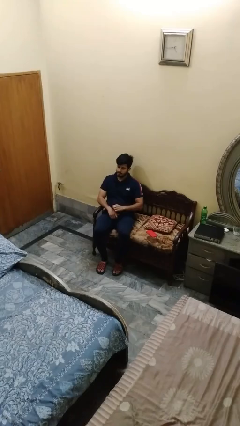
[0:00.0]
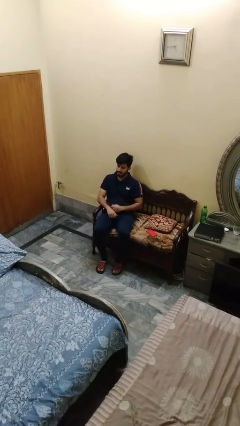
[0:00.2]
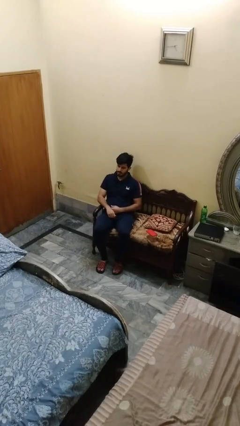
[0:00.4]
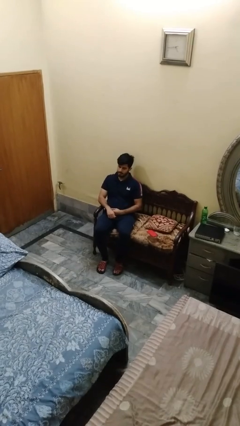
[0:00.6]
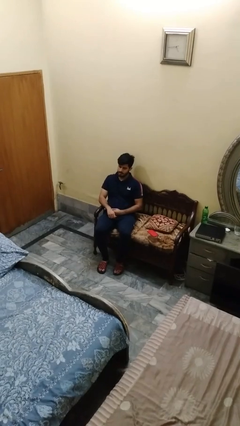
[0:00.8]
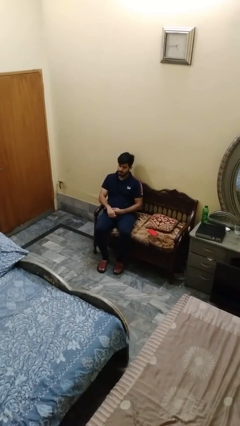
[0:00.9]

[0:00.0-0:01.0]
person gestures lower hand

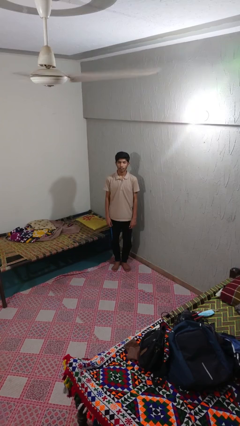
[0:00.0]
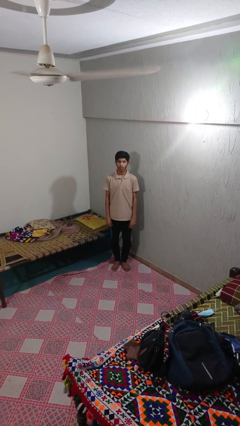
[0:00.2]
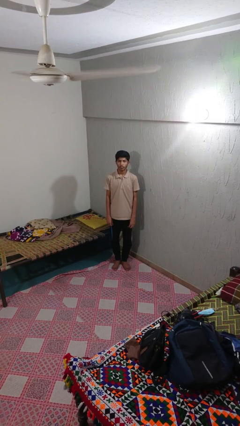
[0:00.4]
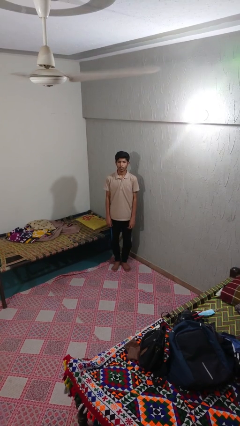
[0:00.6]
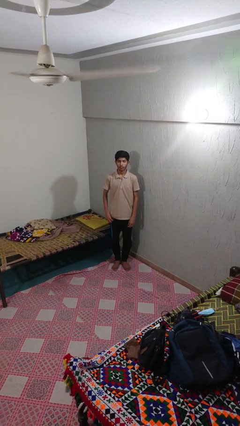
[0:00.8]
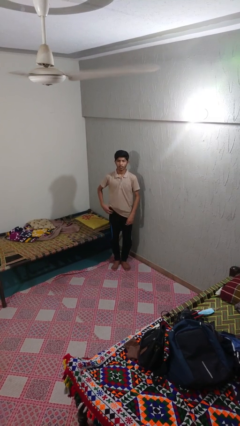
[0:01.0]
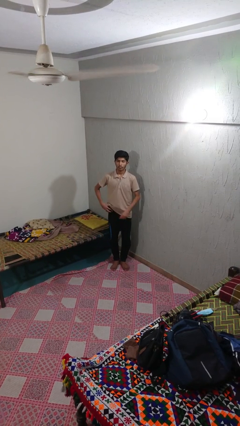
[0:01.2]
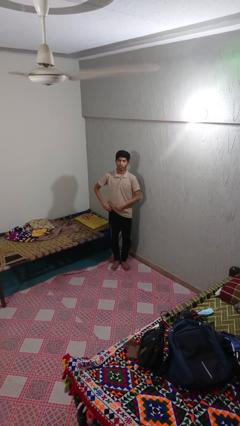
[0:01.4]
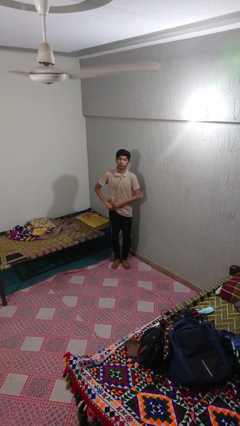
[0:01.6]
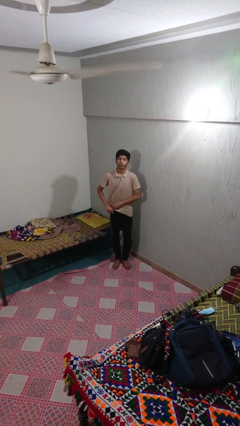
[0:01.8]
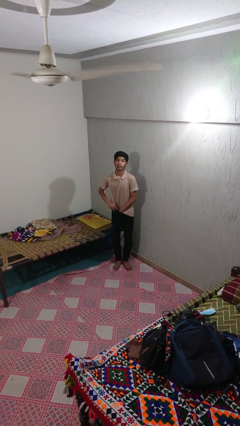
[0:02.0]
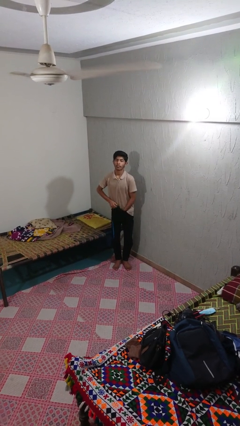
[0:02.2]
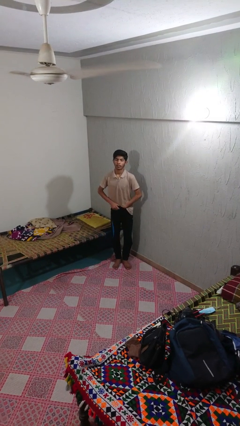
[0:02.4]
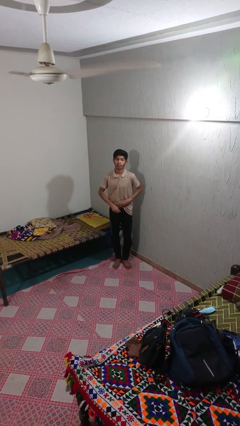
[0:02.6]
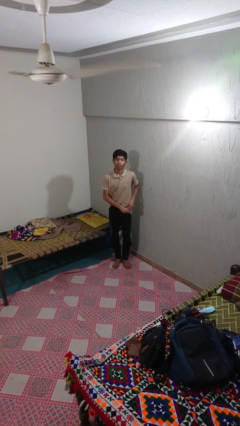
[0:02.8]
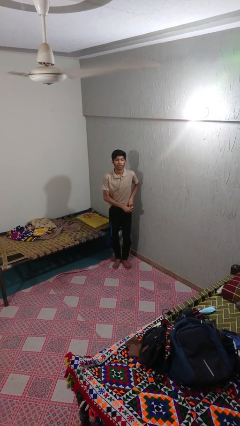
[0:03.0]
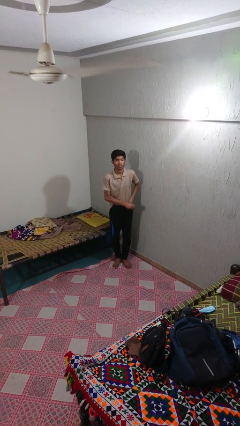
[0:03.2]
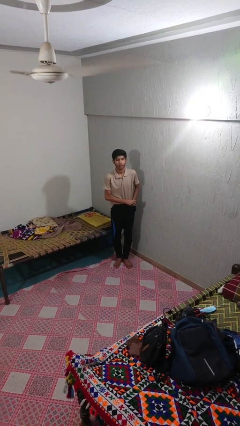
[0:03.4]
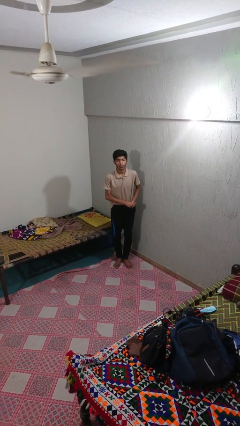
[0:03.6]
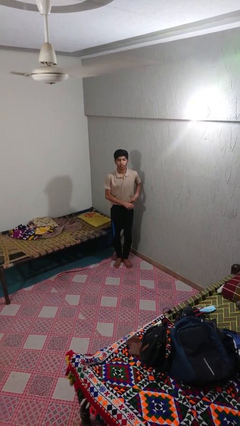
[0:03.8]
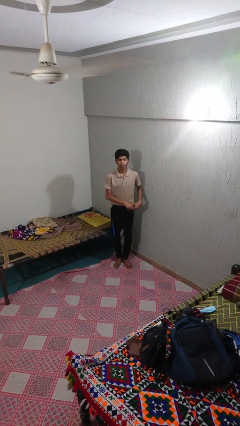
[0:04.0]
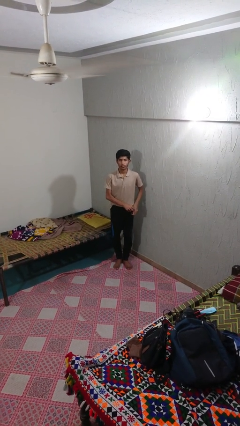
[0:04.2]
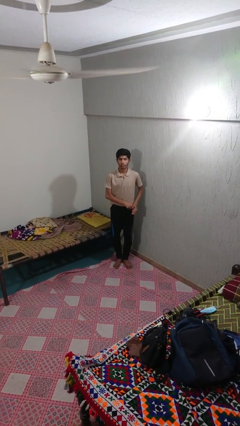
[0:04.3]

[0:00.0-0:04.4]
person tucks in shirt

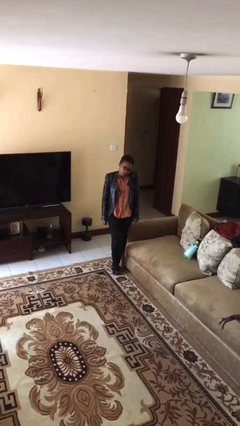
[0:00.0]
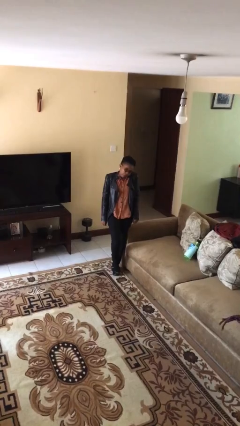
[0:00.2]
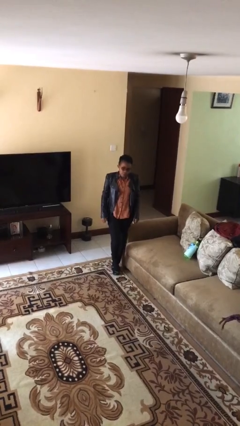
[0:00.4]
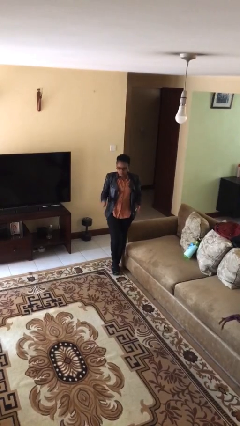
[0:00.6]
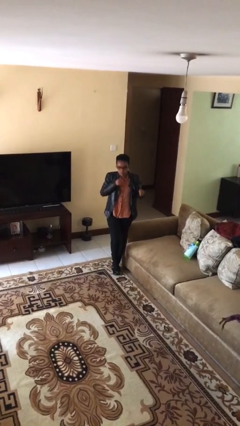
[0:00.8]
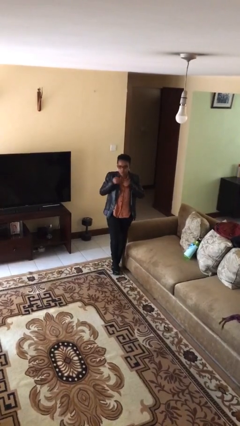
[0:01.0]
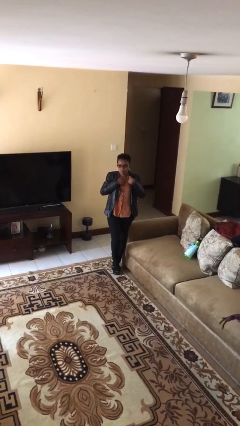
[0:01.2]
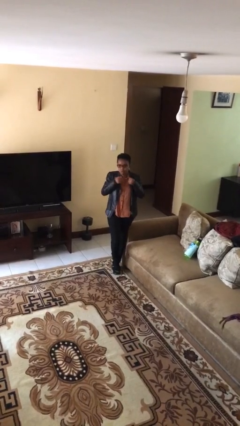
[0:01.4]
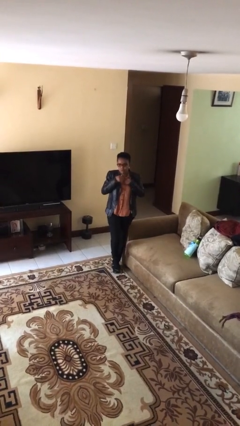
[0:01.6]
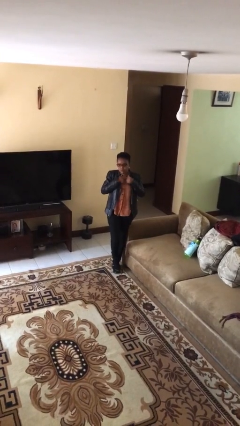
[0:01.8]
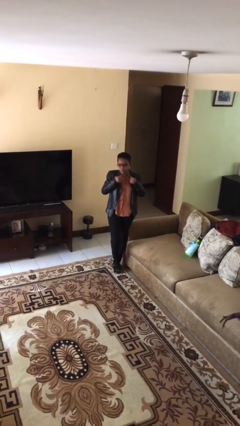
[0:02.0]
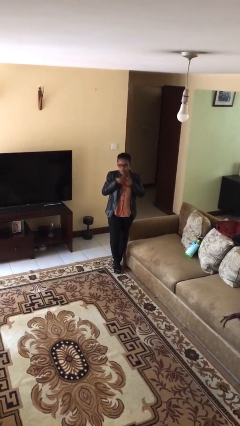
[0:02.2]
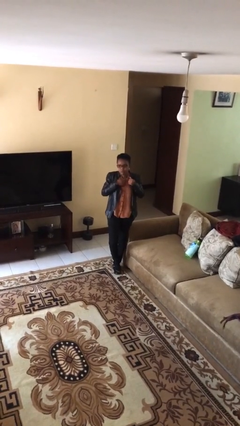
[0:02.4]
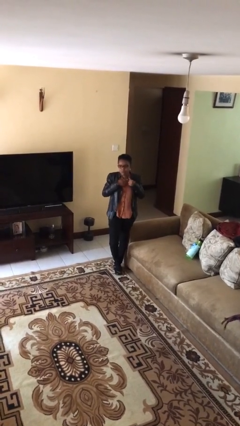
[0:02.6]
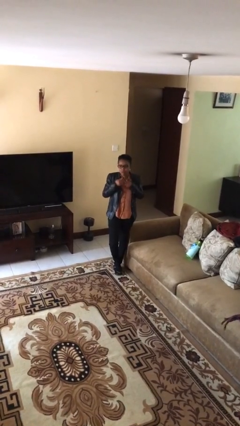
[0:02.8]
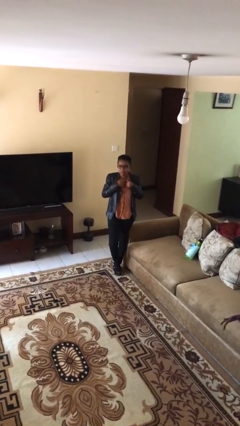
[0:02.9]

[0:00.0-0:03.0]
person drums on chest

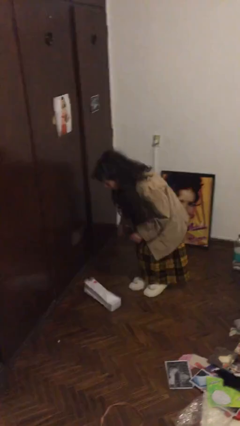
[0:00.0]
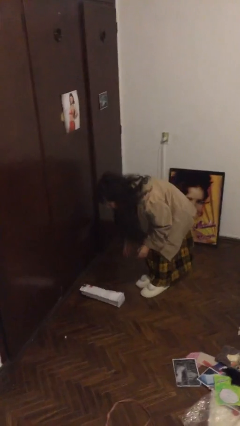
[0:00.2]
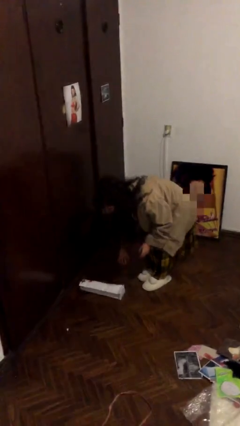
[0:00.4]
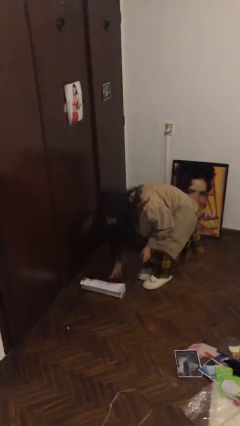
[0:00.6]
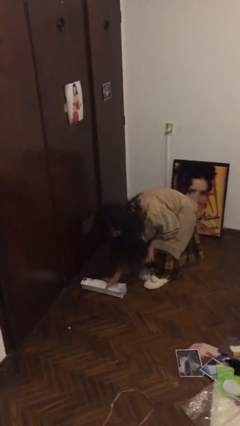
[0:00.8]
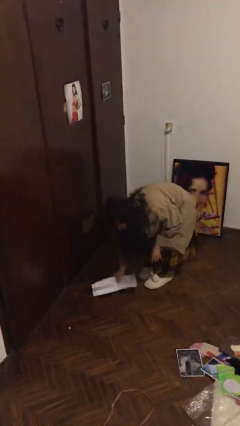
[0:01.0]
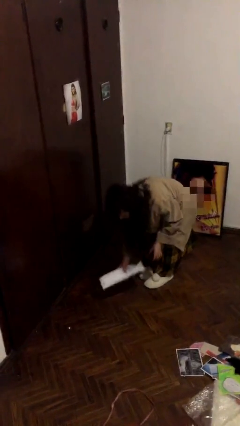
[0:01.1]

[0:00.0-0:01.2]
person drops object

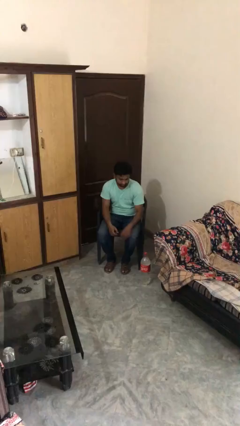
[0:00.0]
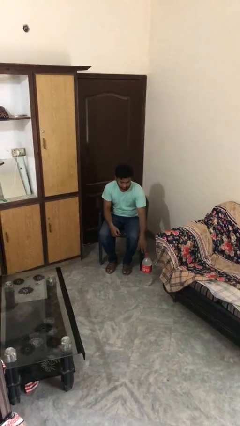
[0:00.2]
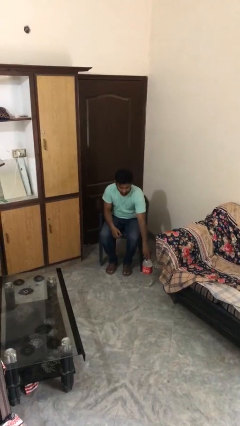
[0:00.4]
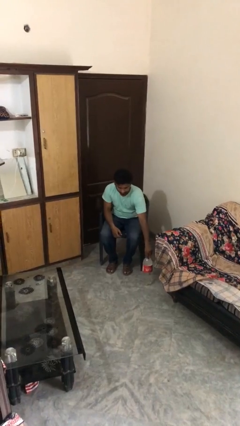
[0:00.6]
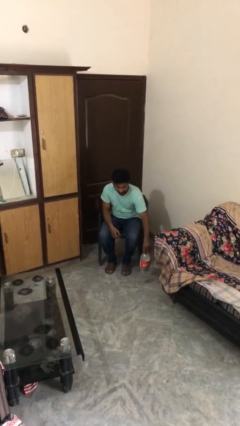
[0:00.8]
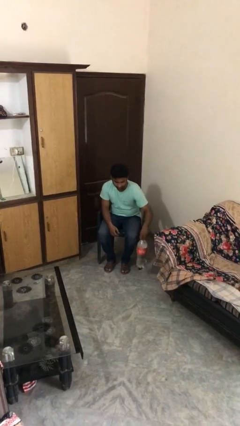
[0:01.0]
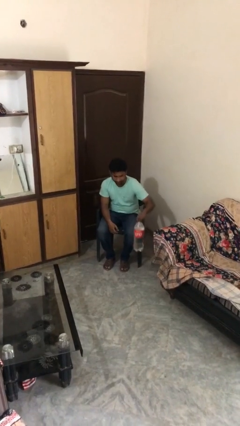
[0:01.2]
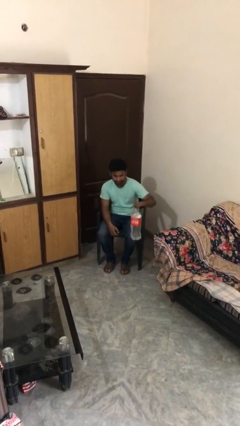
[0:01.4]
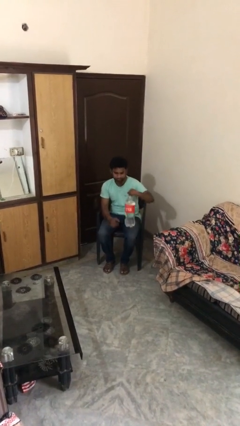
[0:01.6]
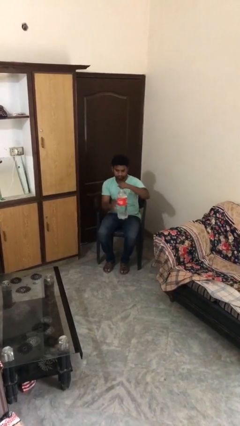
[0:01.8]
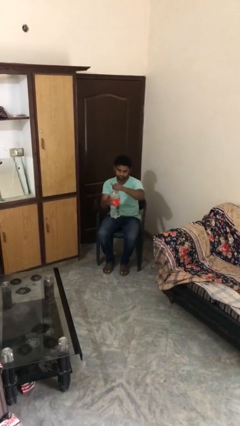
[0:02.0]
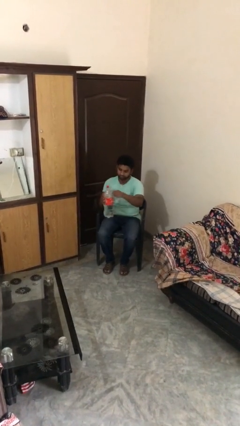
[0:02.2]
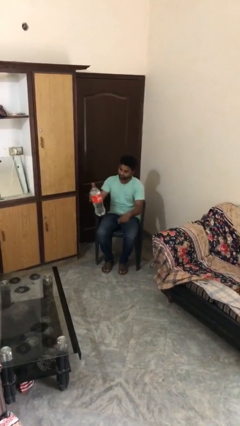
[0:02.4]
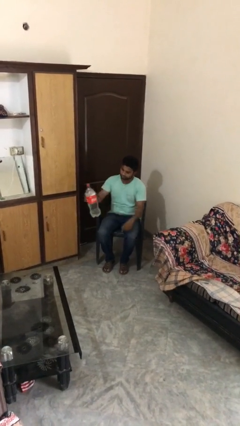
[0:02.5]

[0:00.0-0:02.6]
person picks up object from floor

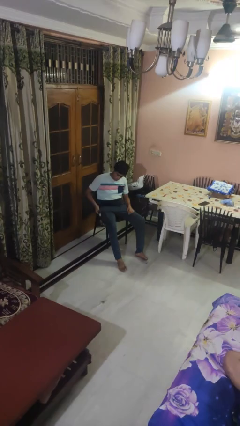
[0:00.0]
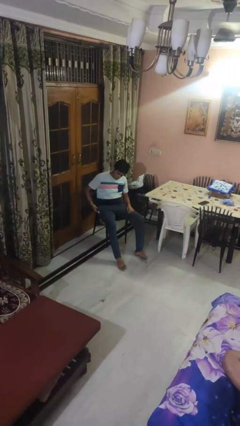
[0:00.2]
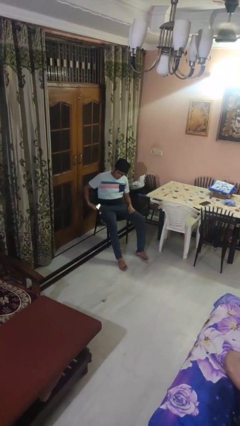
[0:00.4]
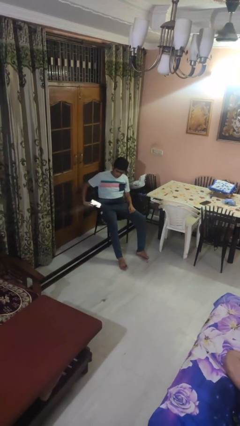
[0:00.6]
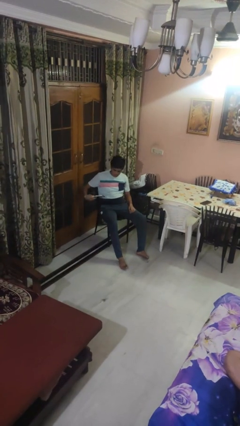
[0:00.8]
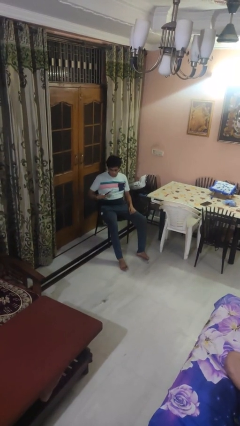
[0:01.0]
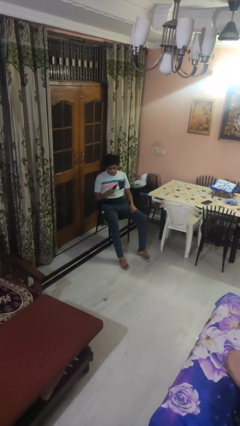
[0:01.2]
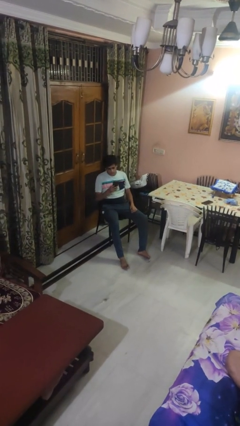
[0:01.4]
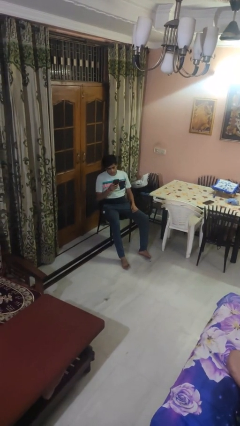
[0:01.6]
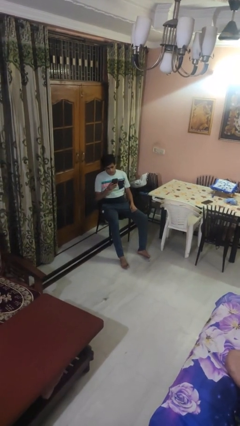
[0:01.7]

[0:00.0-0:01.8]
person takes phone from pocket

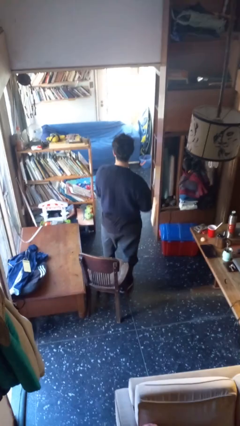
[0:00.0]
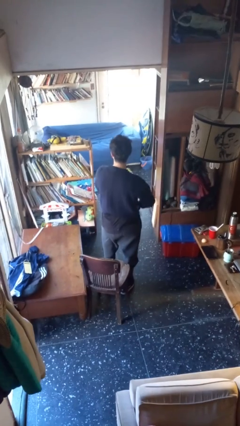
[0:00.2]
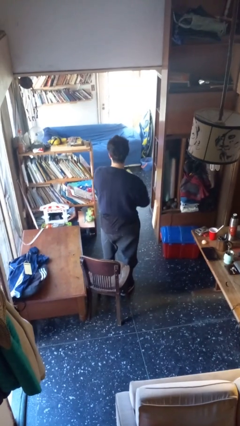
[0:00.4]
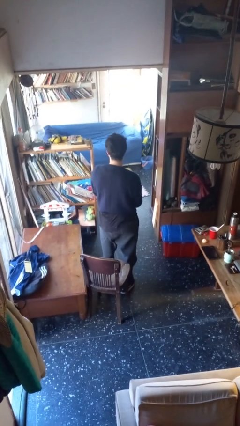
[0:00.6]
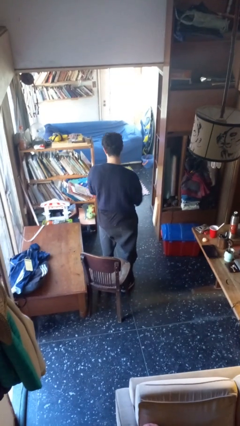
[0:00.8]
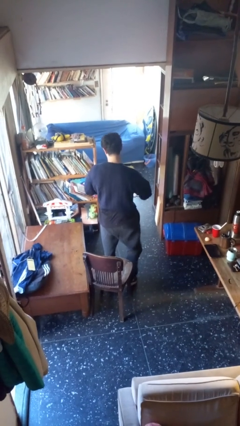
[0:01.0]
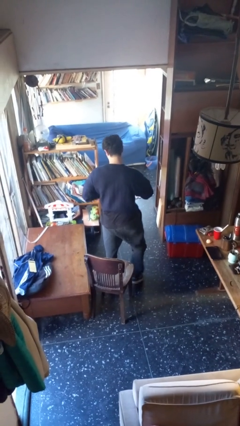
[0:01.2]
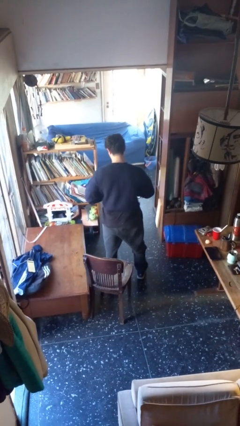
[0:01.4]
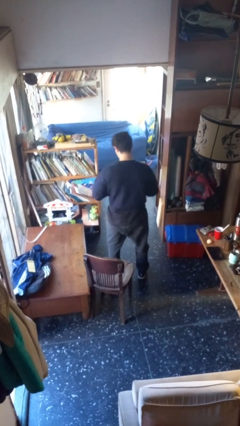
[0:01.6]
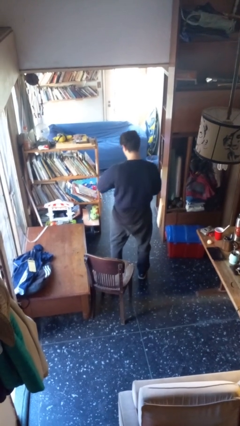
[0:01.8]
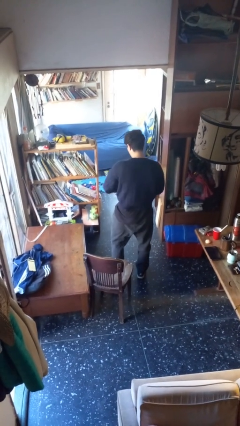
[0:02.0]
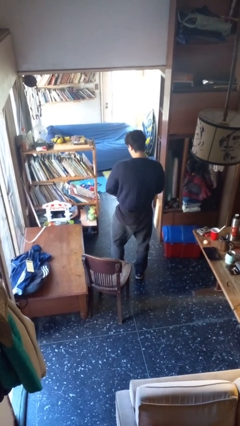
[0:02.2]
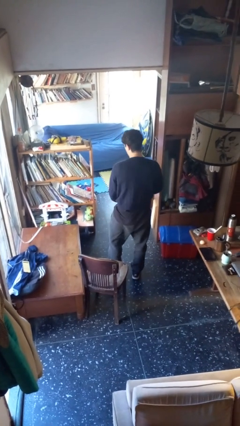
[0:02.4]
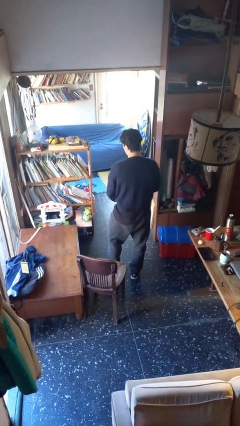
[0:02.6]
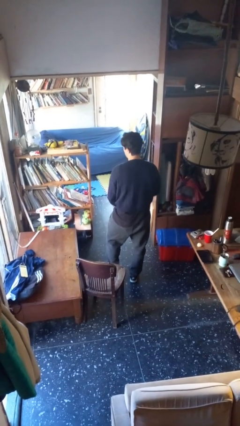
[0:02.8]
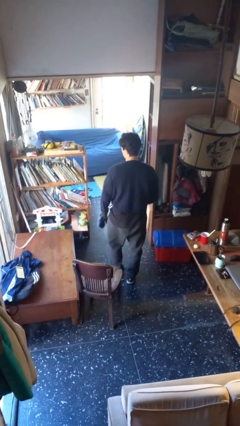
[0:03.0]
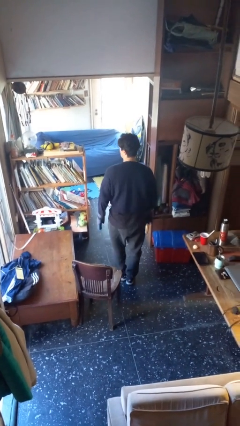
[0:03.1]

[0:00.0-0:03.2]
person puts on gloves
